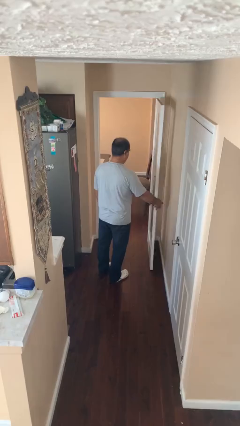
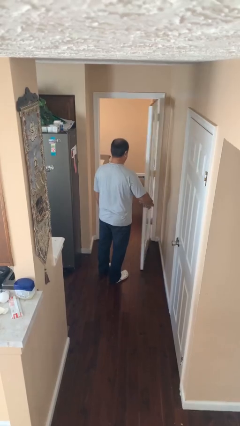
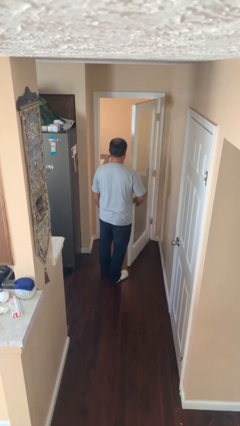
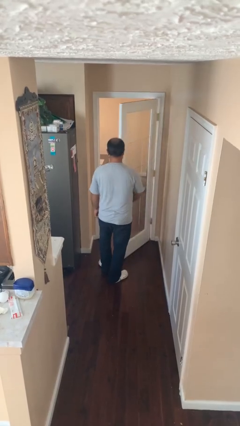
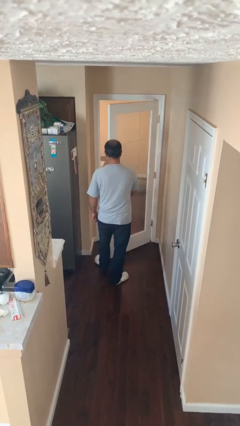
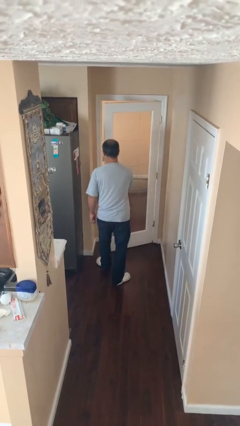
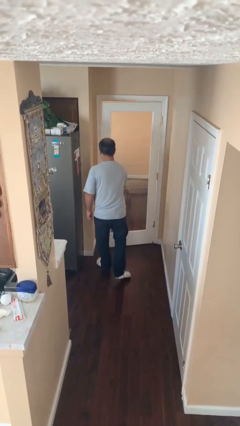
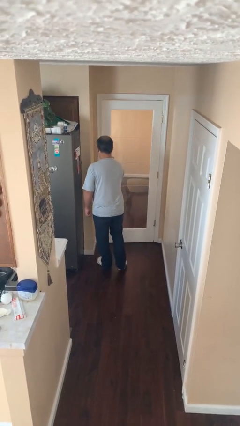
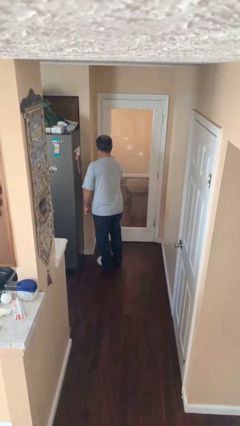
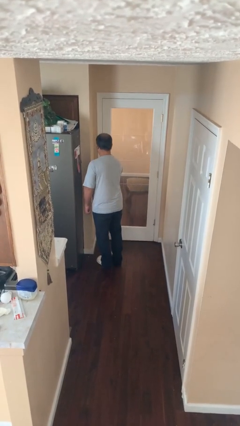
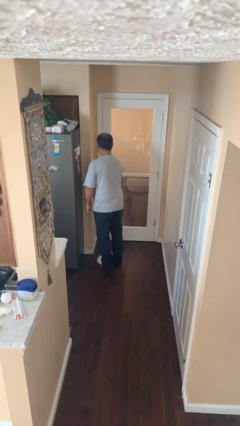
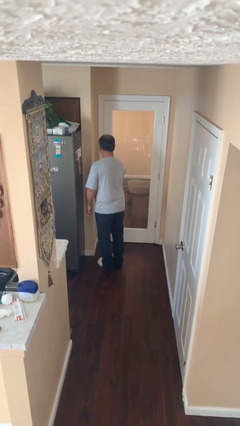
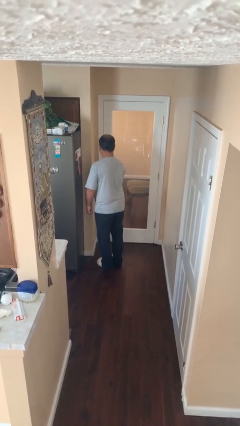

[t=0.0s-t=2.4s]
person closes facility door

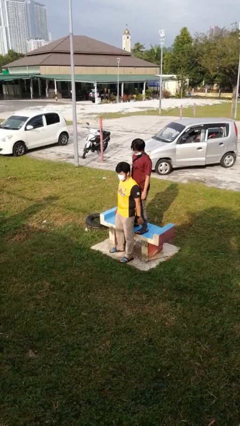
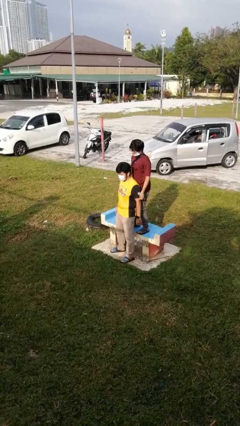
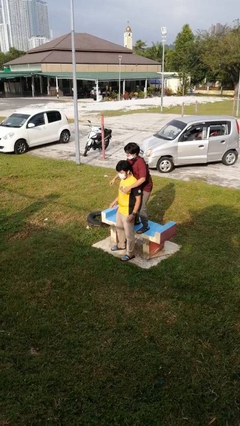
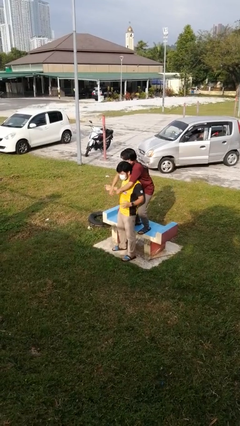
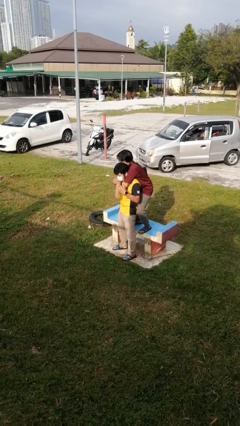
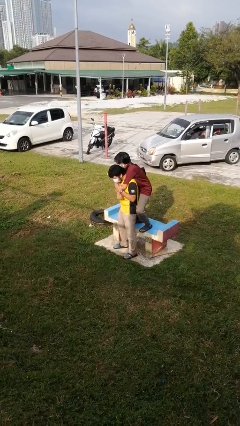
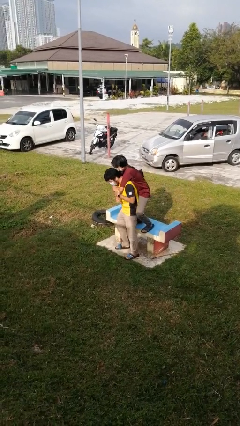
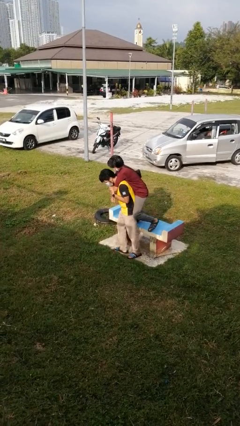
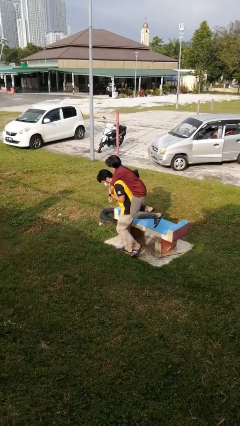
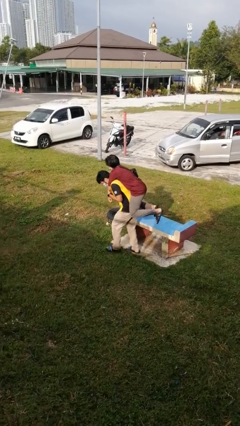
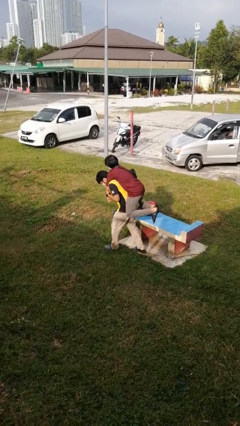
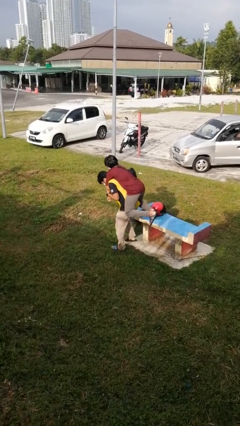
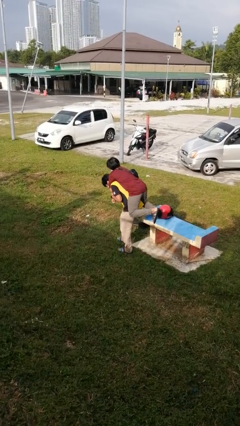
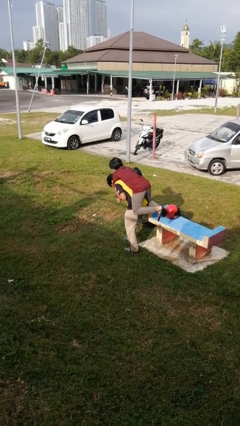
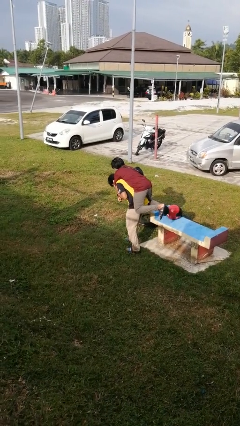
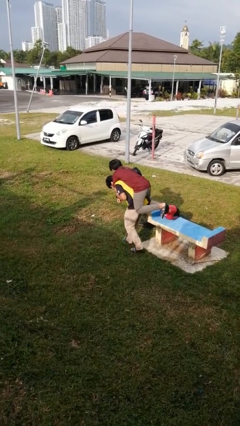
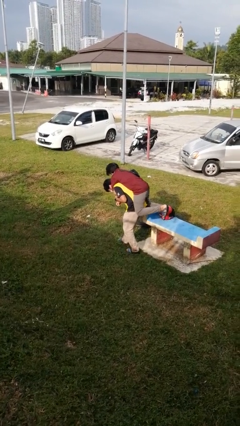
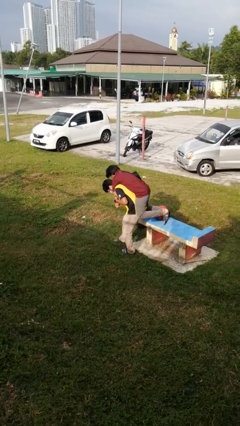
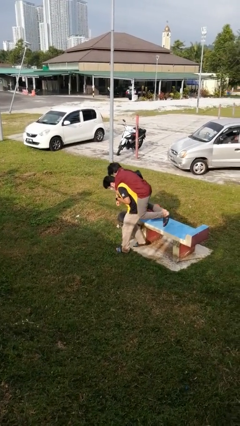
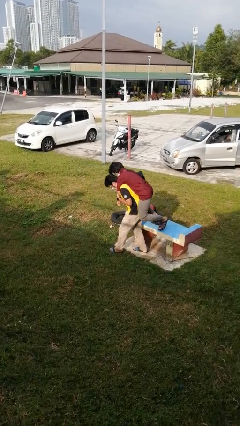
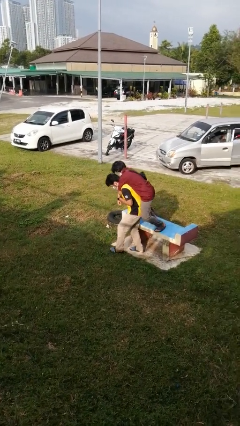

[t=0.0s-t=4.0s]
person carries person over shoulder

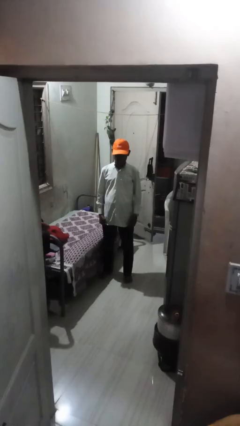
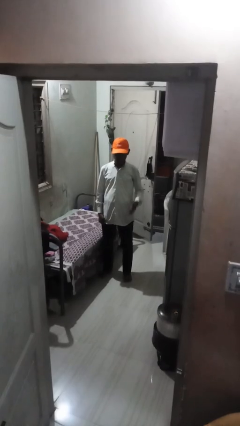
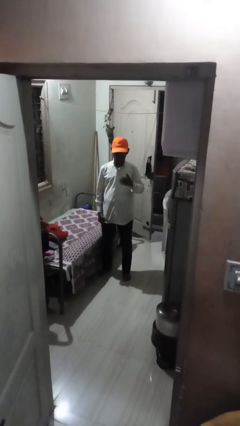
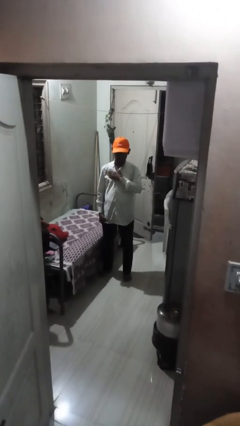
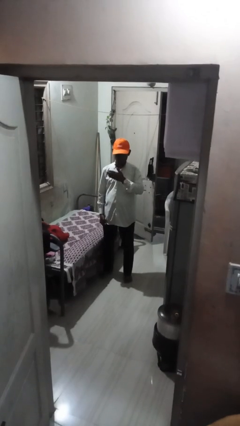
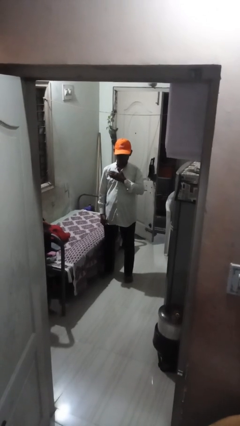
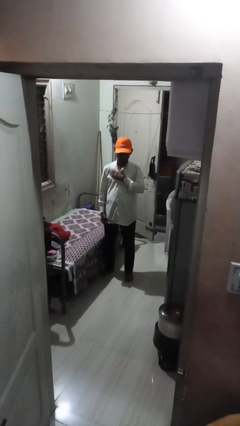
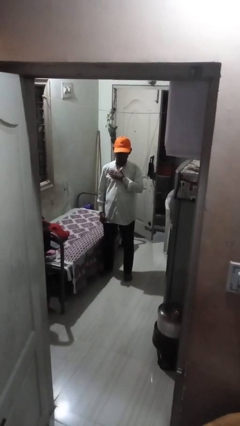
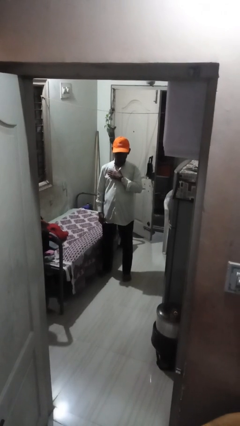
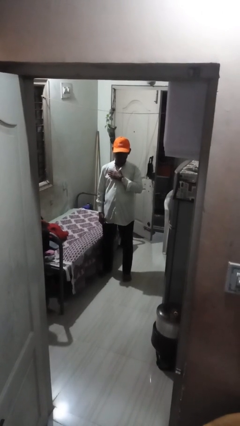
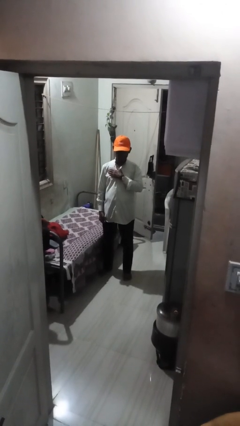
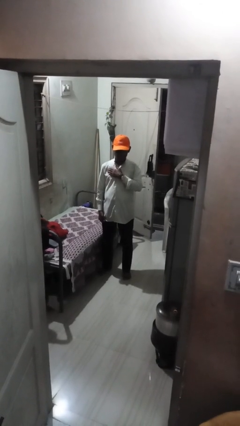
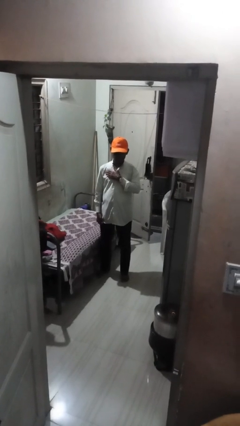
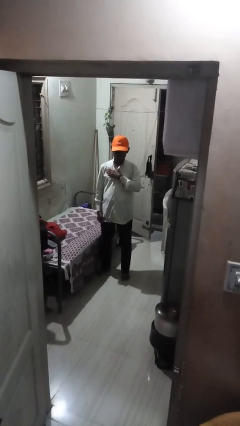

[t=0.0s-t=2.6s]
person drums on chest

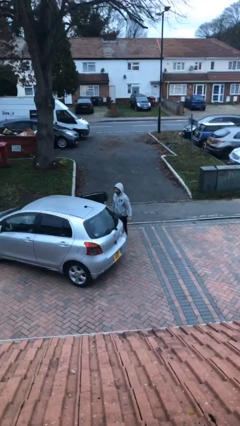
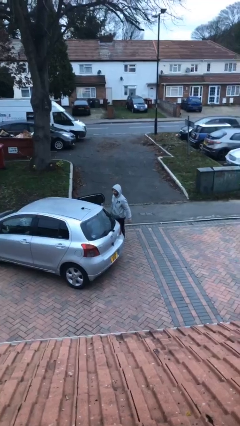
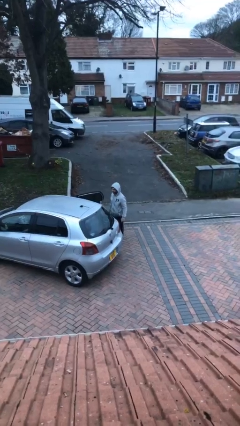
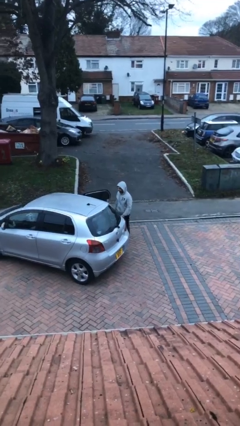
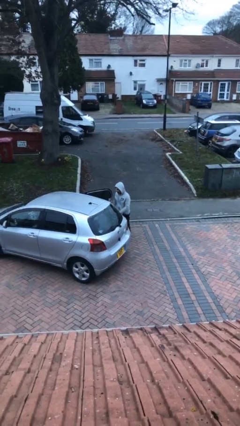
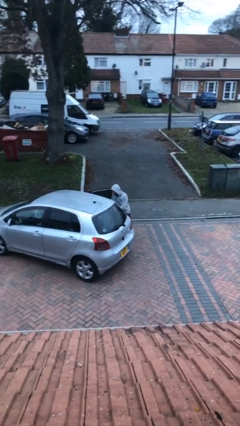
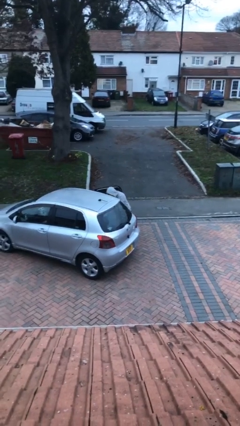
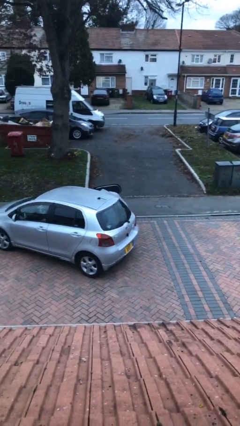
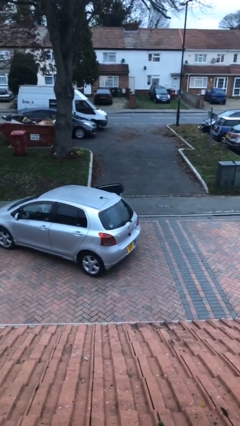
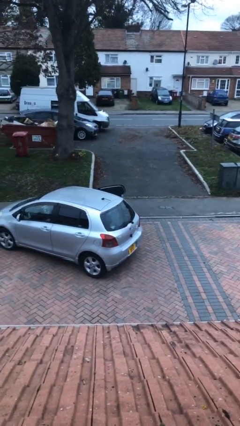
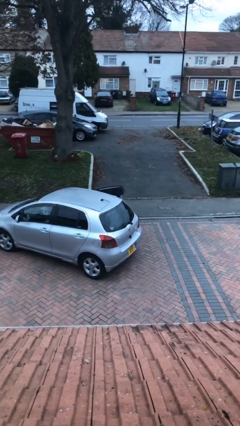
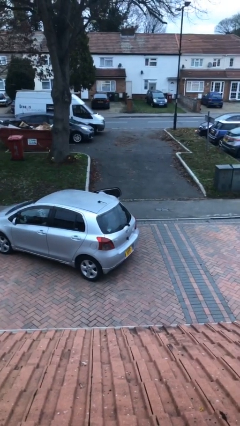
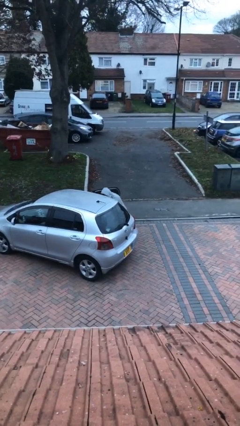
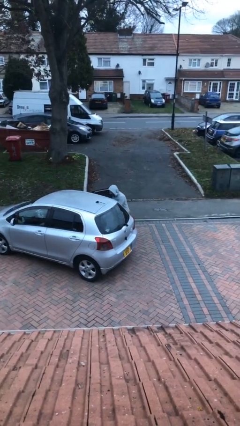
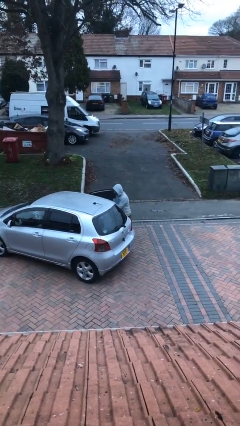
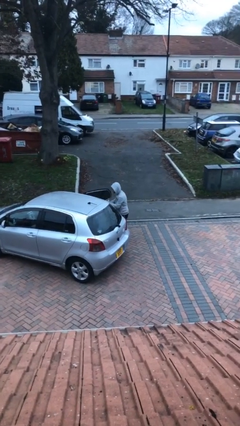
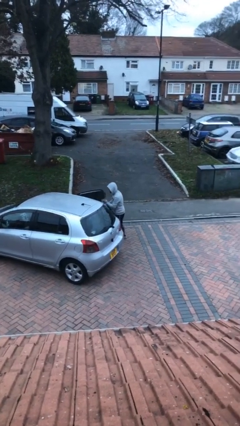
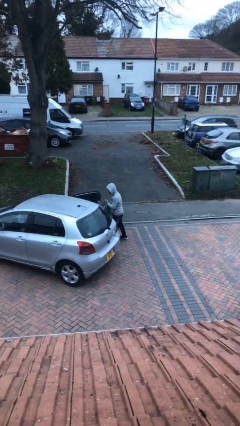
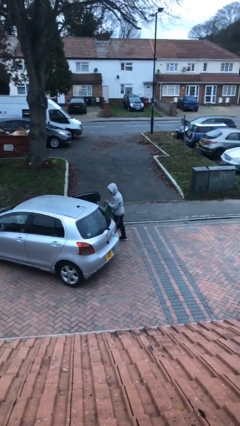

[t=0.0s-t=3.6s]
person unloads car

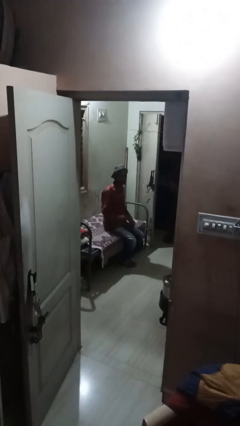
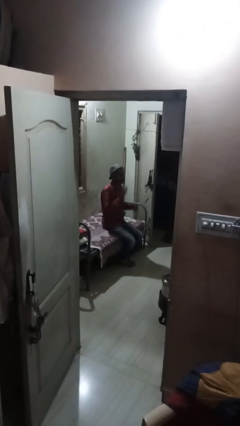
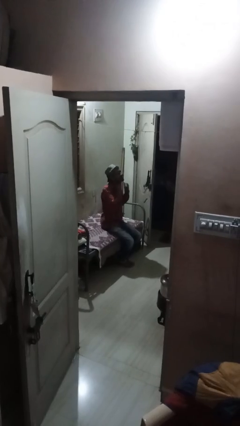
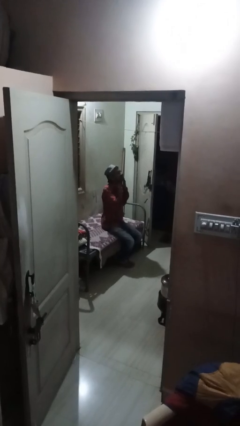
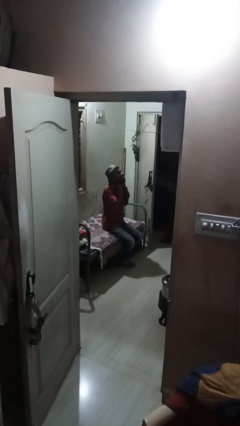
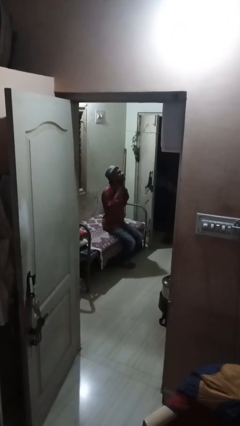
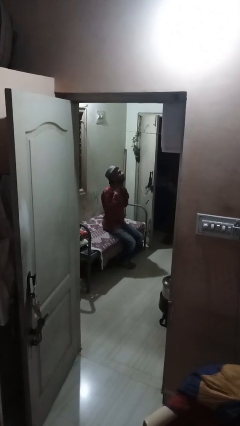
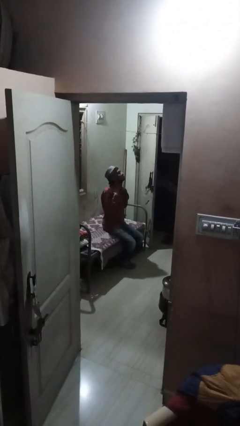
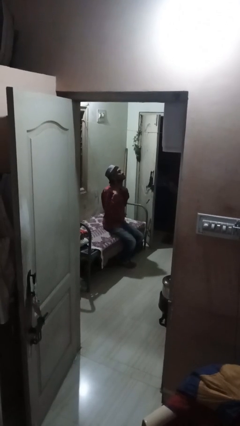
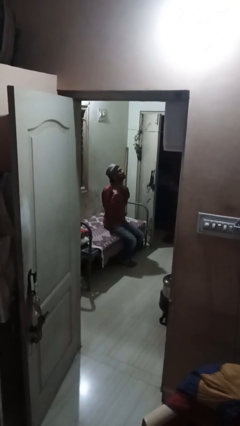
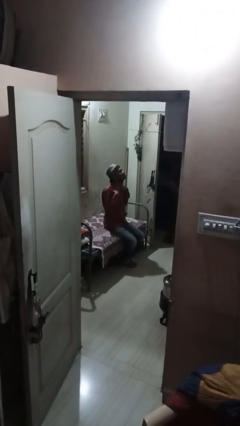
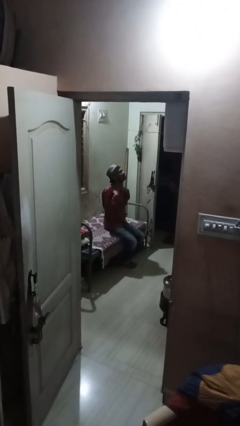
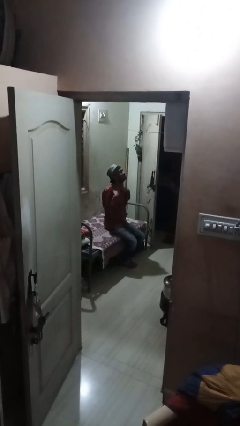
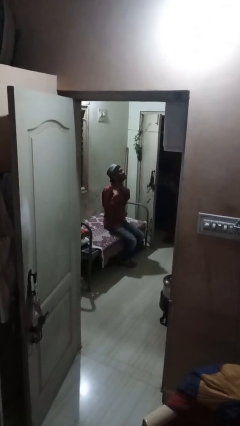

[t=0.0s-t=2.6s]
person rubs neck

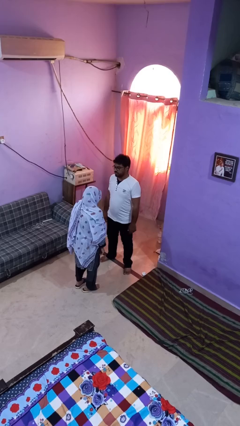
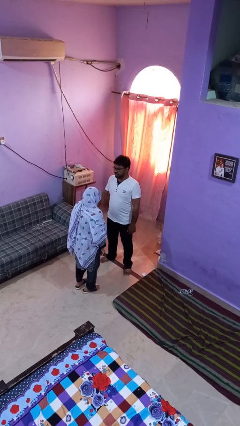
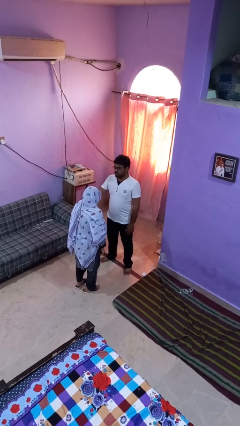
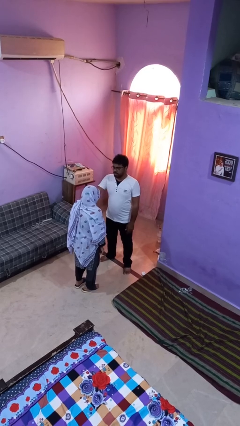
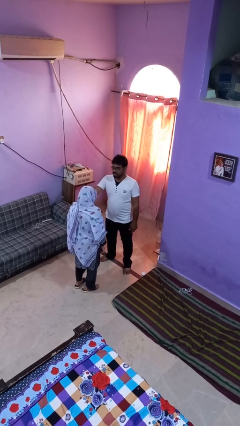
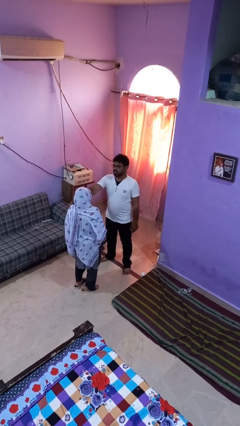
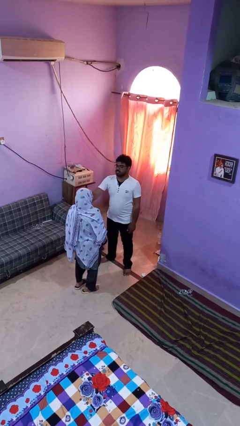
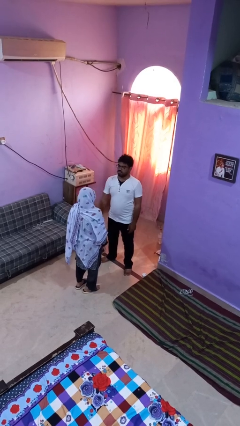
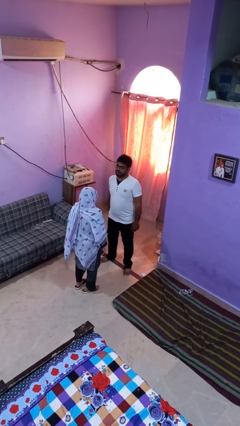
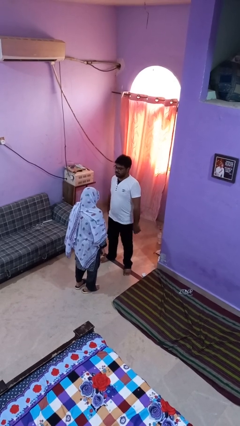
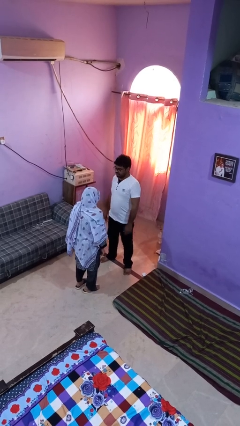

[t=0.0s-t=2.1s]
person shoves person
